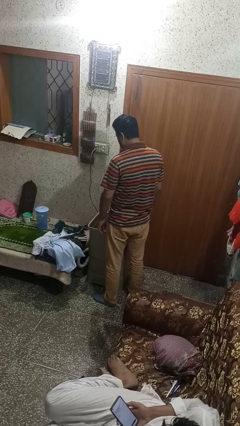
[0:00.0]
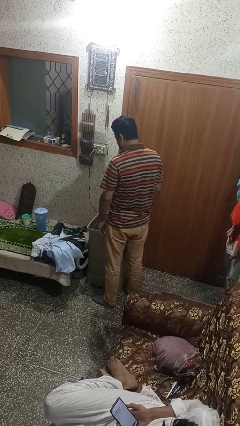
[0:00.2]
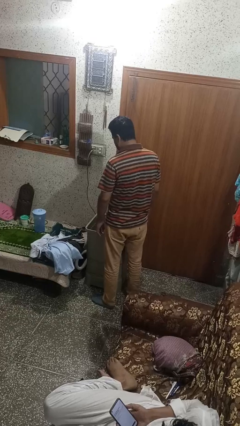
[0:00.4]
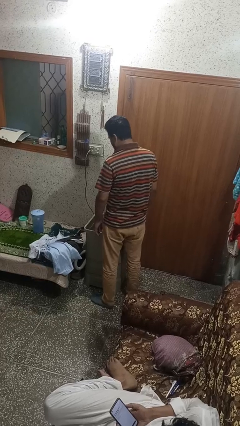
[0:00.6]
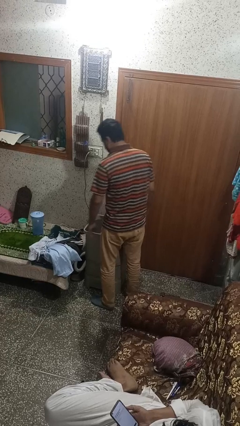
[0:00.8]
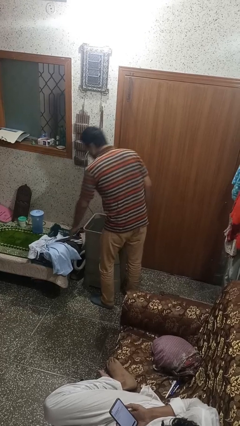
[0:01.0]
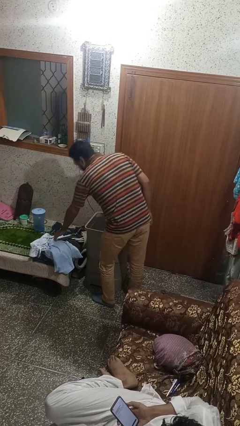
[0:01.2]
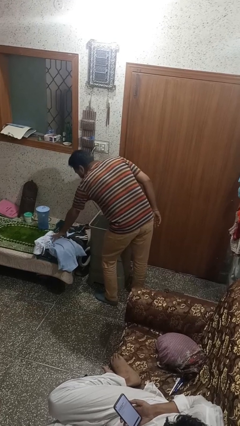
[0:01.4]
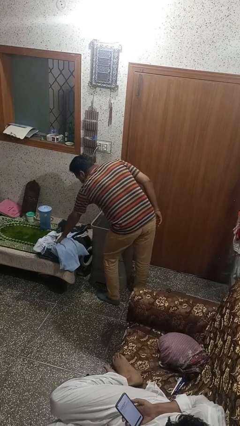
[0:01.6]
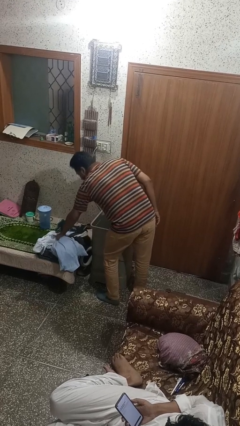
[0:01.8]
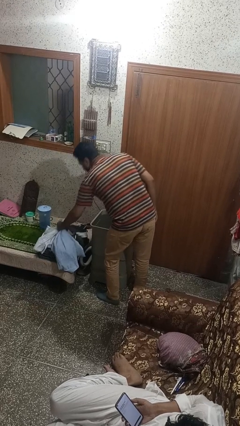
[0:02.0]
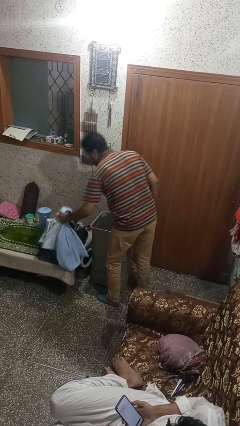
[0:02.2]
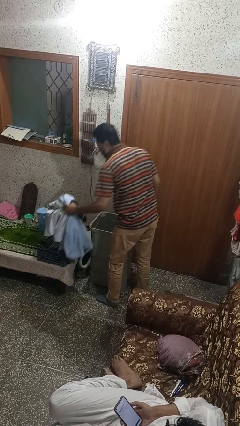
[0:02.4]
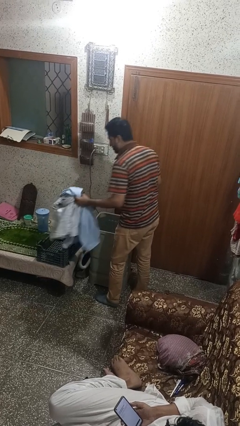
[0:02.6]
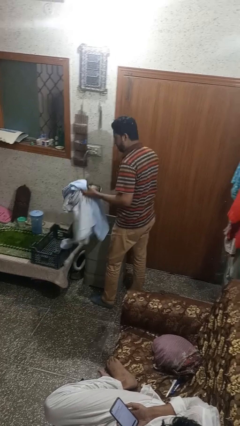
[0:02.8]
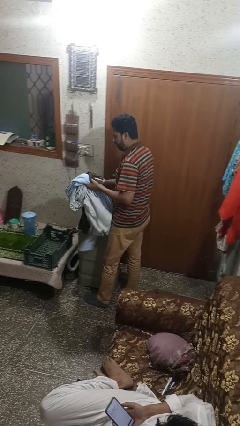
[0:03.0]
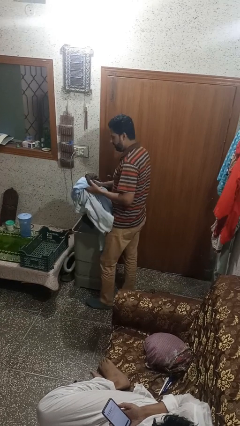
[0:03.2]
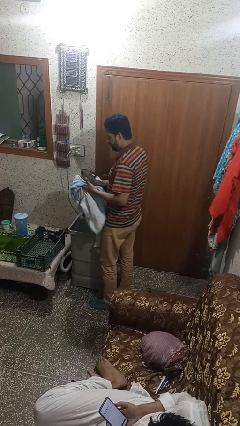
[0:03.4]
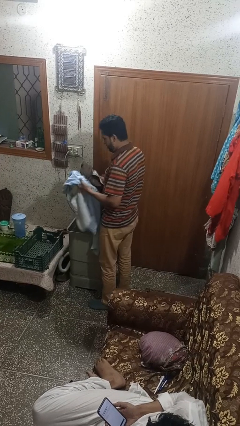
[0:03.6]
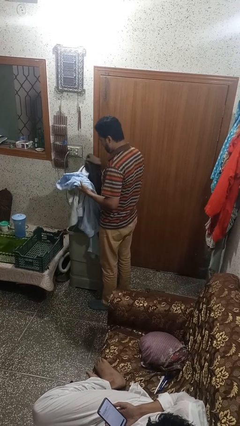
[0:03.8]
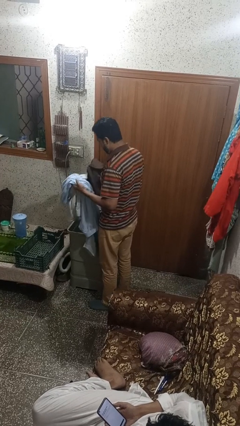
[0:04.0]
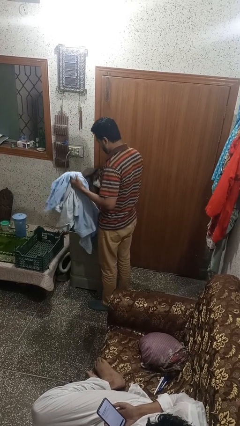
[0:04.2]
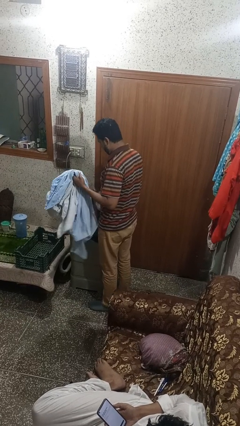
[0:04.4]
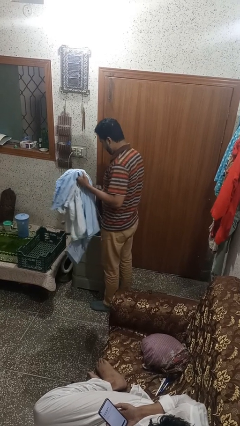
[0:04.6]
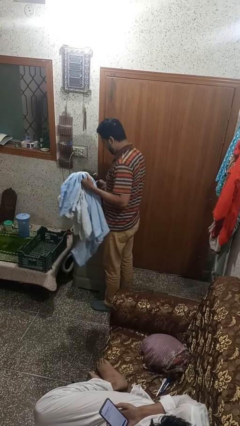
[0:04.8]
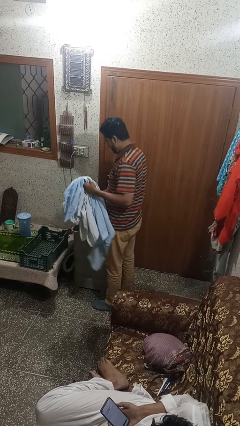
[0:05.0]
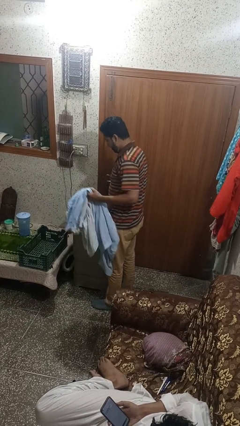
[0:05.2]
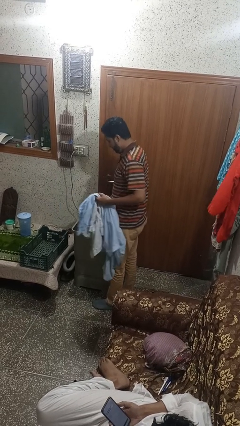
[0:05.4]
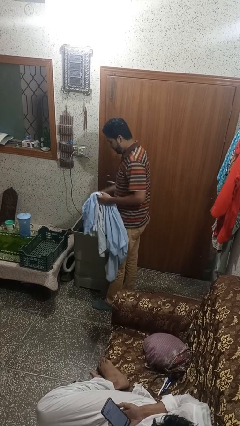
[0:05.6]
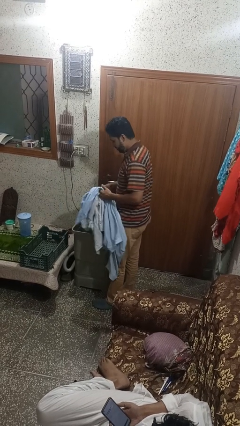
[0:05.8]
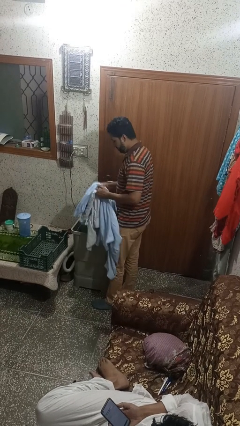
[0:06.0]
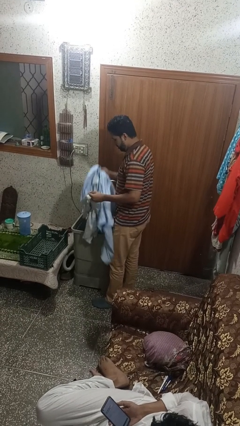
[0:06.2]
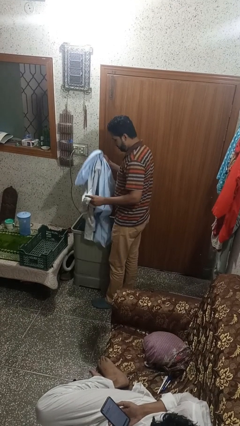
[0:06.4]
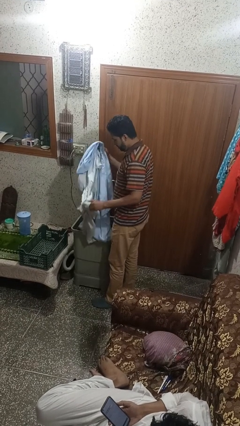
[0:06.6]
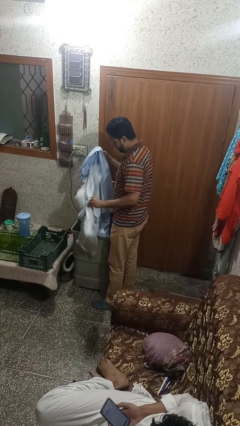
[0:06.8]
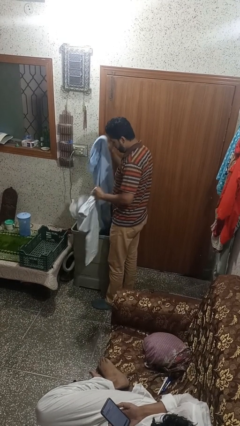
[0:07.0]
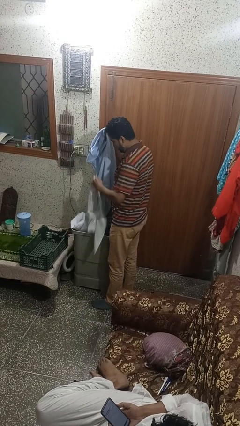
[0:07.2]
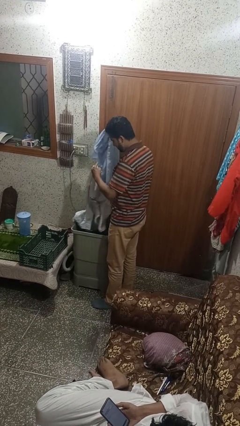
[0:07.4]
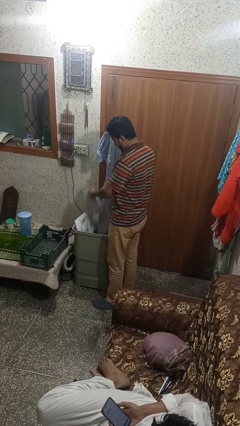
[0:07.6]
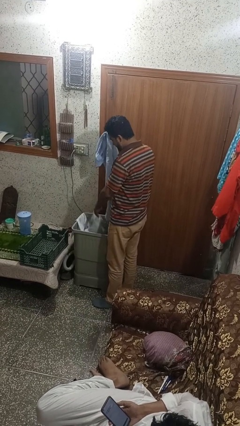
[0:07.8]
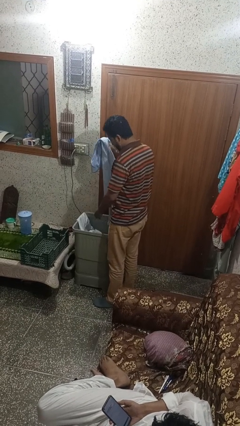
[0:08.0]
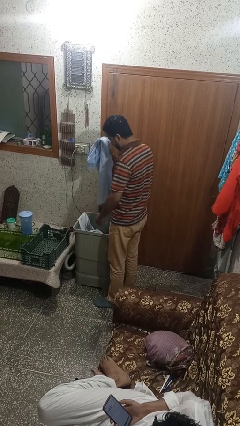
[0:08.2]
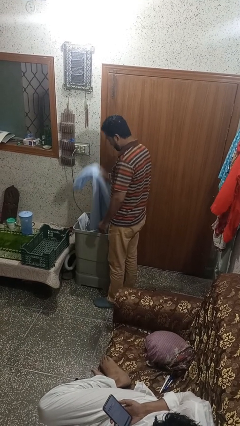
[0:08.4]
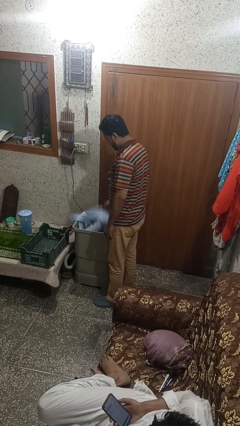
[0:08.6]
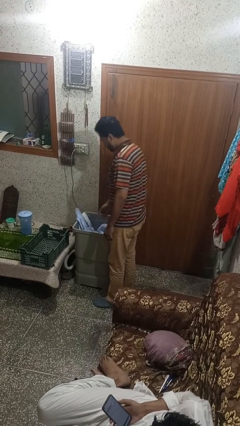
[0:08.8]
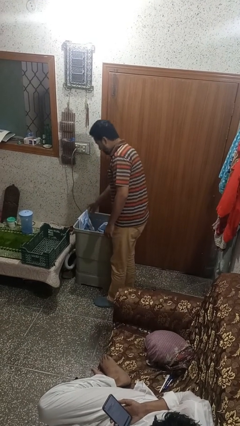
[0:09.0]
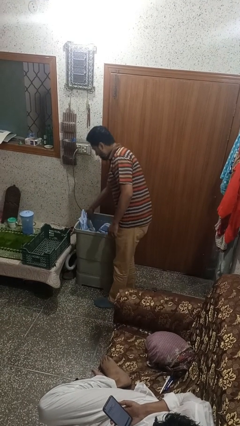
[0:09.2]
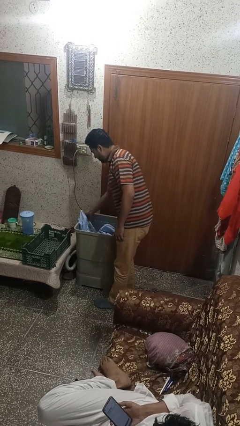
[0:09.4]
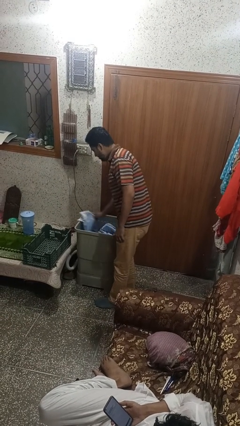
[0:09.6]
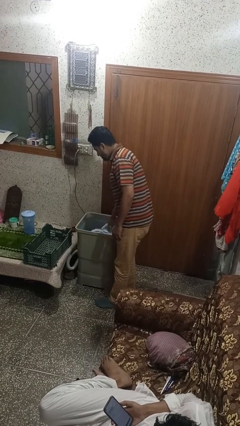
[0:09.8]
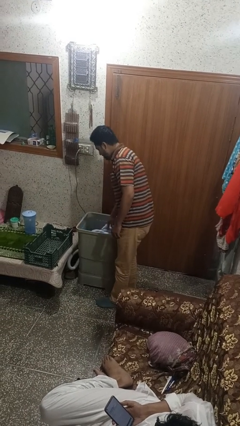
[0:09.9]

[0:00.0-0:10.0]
person loads dryer

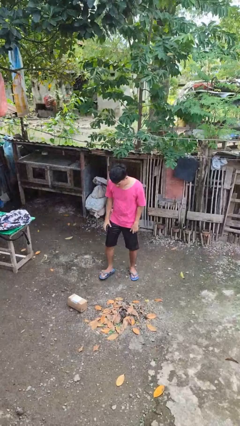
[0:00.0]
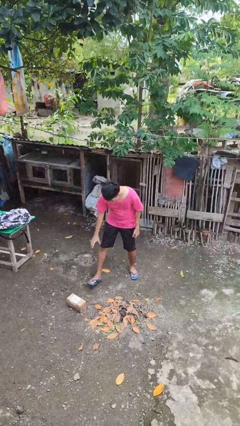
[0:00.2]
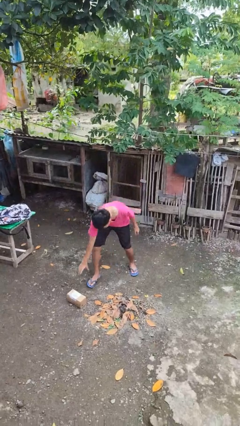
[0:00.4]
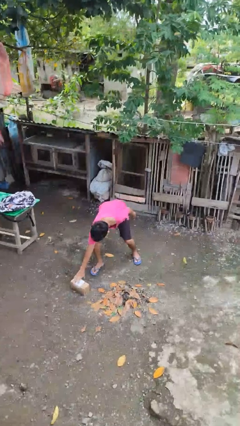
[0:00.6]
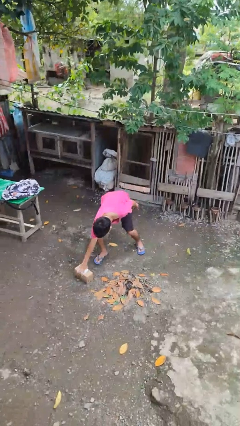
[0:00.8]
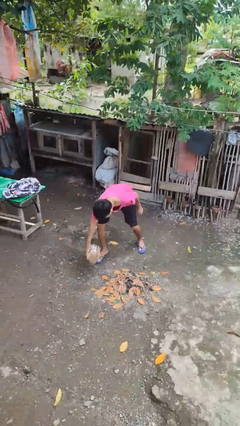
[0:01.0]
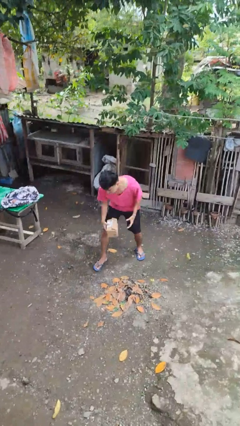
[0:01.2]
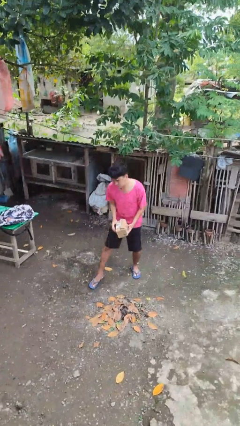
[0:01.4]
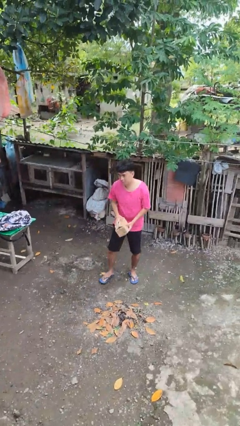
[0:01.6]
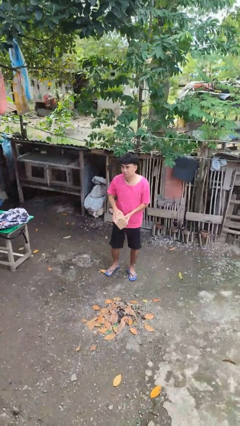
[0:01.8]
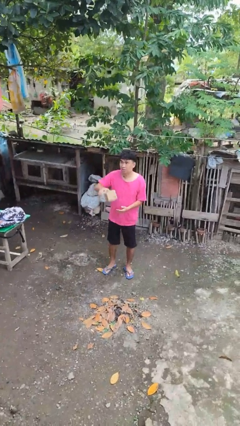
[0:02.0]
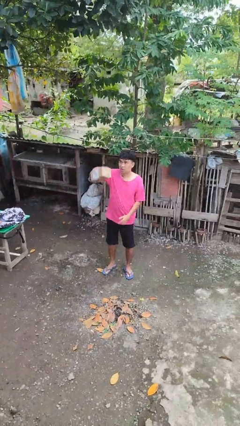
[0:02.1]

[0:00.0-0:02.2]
person picks up object from floor

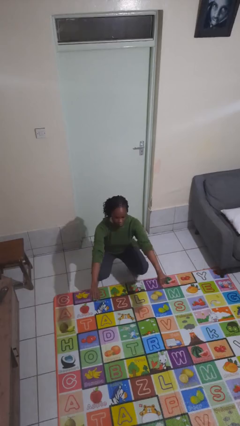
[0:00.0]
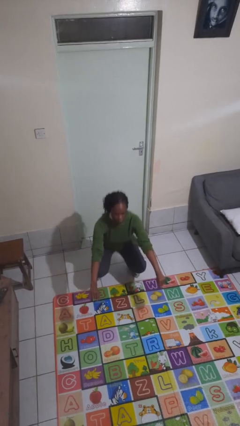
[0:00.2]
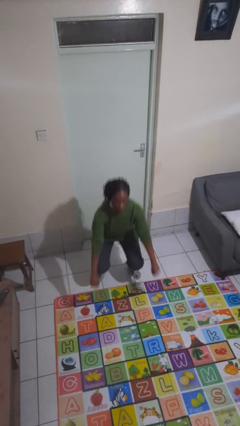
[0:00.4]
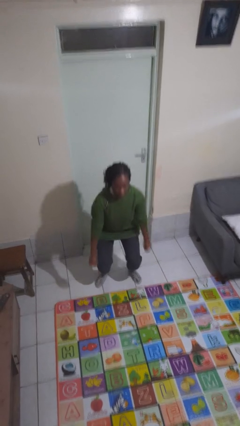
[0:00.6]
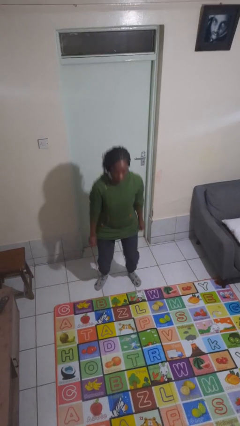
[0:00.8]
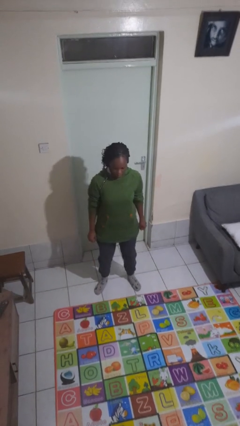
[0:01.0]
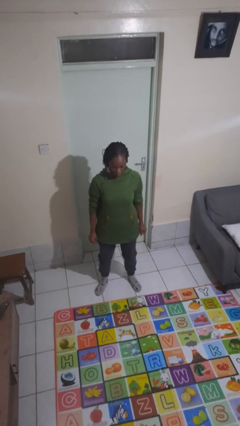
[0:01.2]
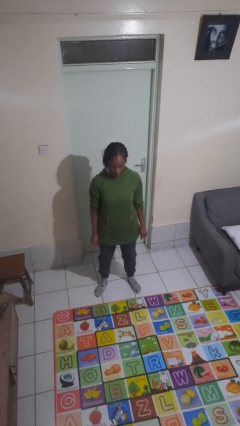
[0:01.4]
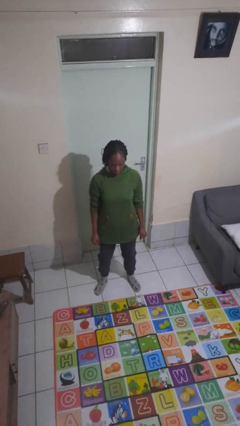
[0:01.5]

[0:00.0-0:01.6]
person stands up

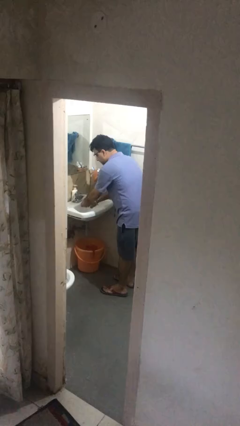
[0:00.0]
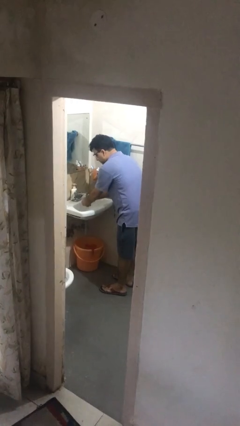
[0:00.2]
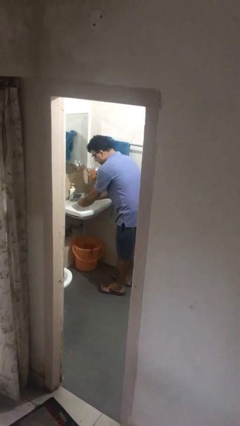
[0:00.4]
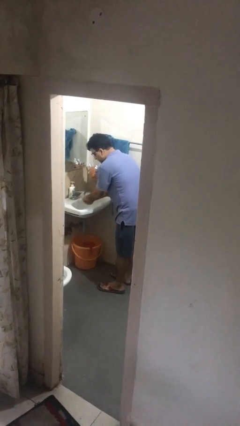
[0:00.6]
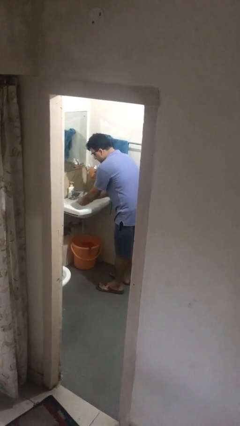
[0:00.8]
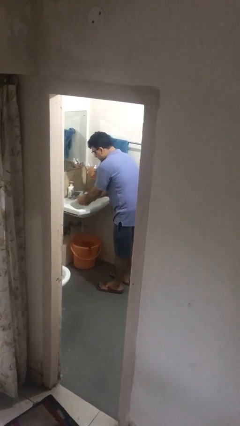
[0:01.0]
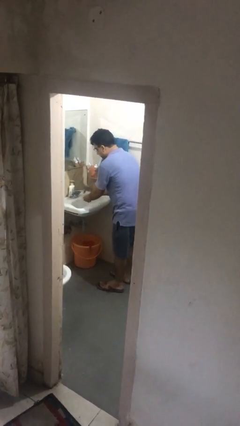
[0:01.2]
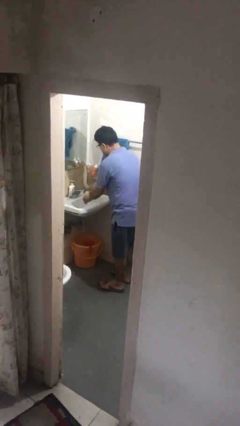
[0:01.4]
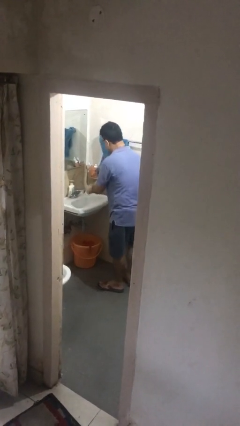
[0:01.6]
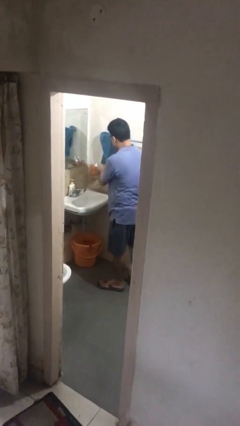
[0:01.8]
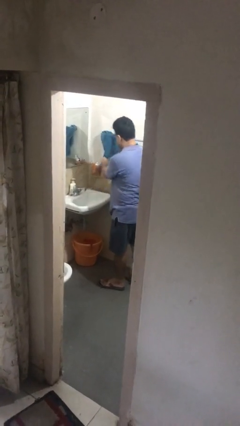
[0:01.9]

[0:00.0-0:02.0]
person washes hands

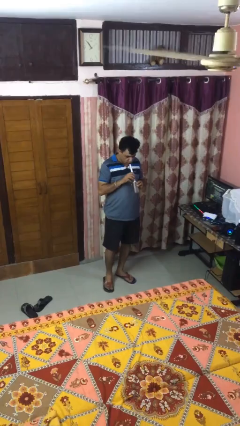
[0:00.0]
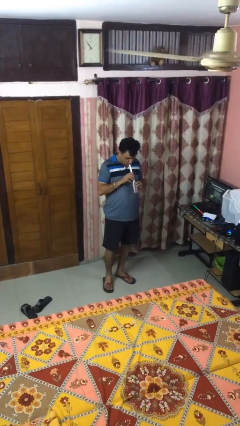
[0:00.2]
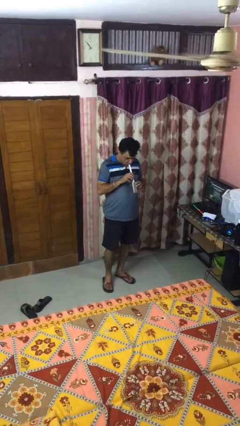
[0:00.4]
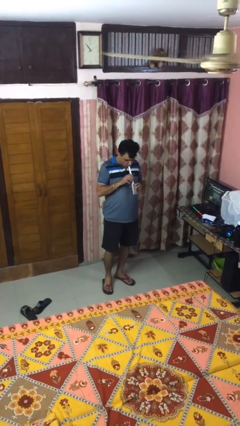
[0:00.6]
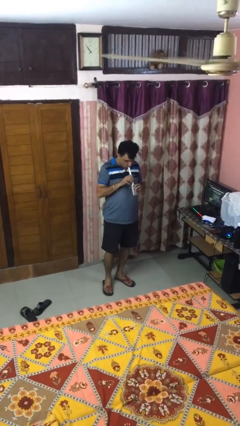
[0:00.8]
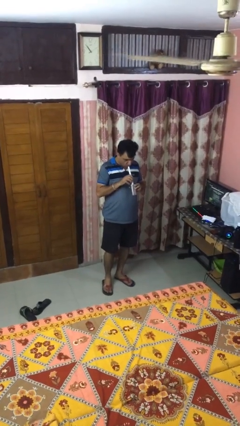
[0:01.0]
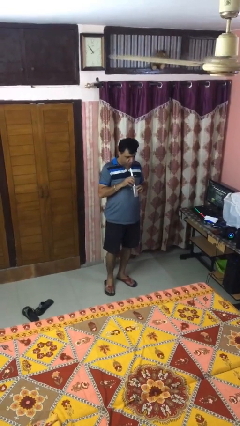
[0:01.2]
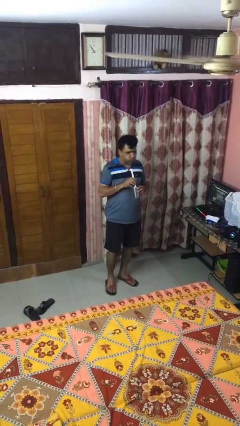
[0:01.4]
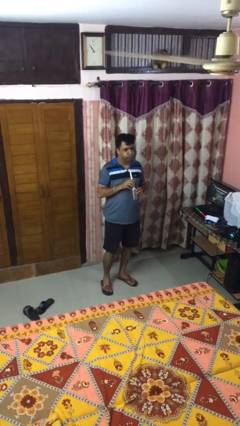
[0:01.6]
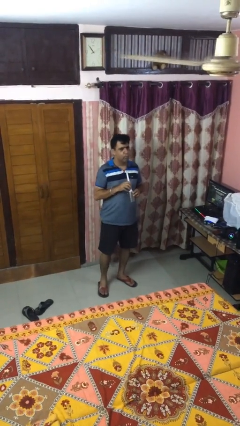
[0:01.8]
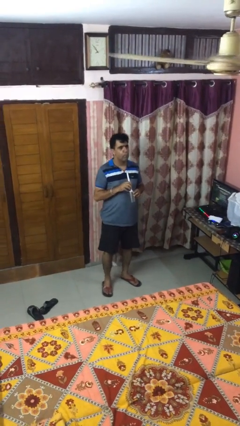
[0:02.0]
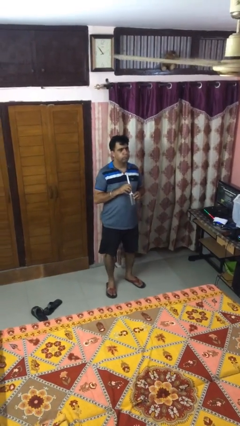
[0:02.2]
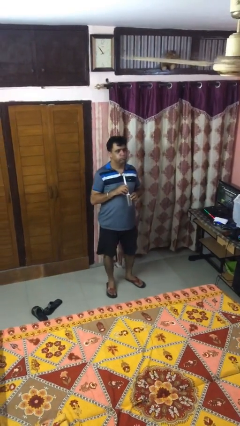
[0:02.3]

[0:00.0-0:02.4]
person drinks from straw
